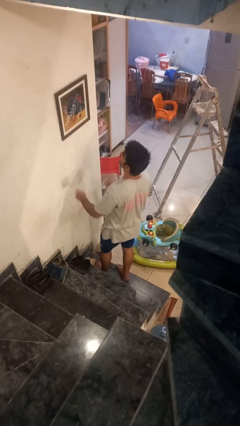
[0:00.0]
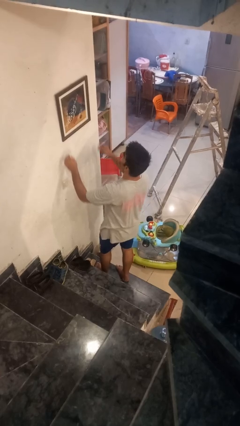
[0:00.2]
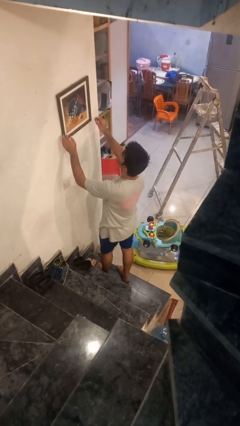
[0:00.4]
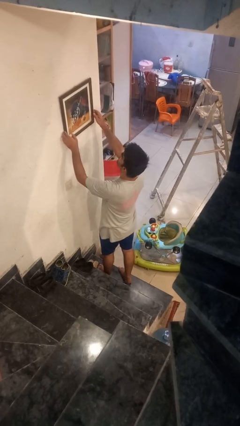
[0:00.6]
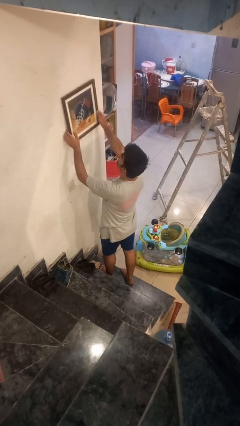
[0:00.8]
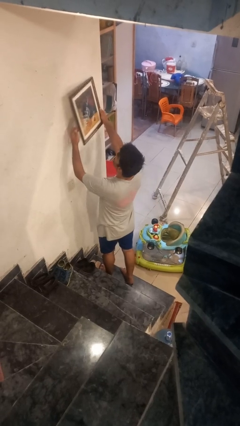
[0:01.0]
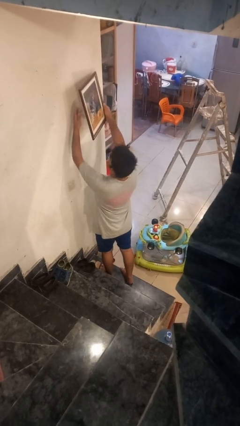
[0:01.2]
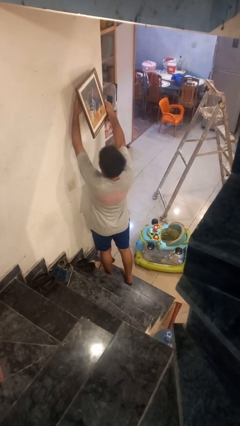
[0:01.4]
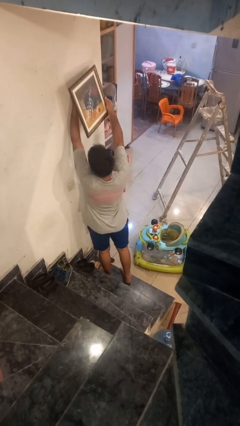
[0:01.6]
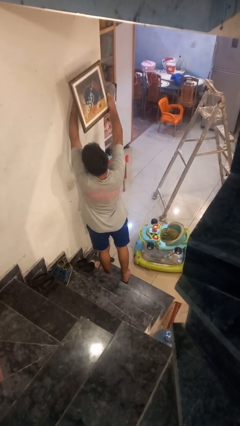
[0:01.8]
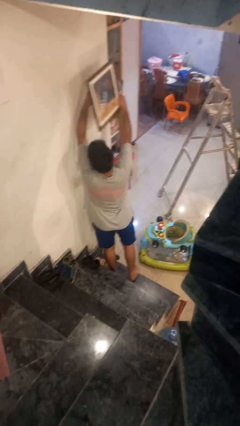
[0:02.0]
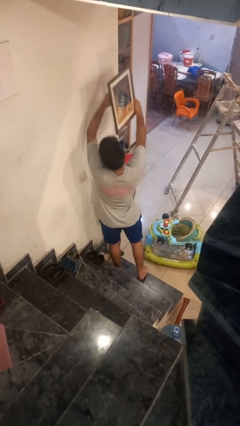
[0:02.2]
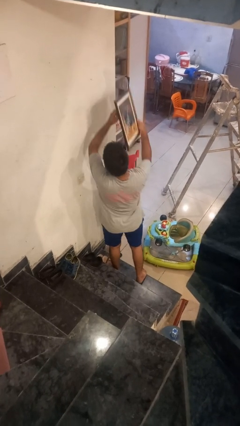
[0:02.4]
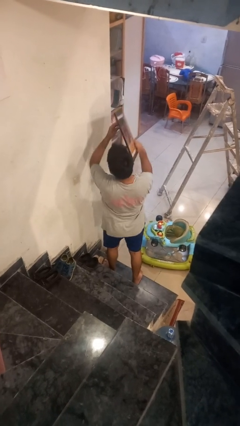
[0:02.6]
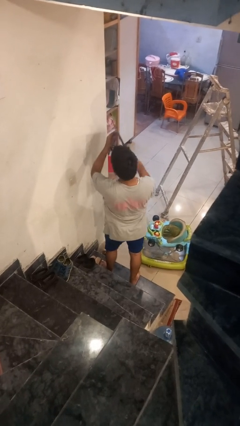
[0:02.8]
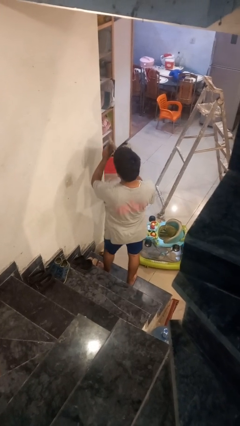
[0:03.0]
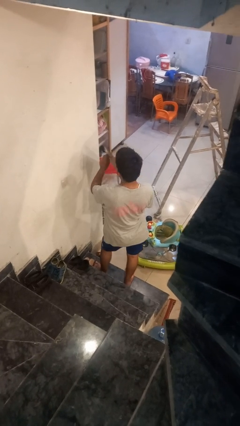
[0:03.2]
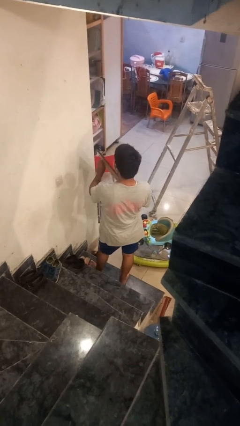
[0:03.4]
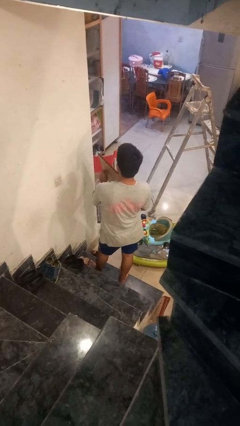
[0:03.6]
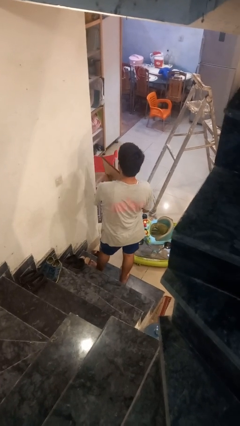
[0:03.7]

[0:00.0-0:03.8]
person takes down picture frame

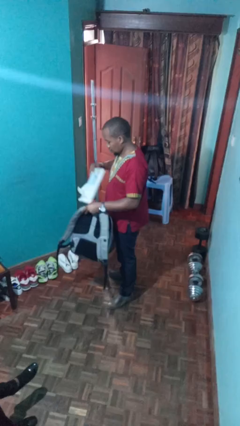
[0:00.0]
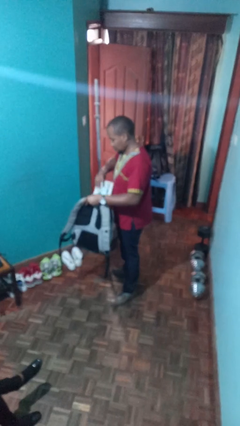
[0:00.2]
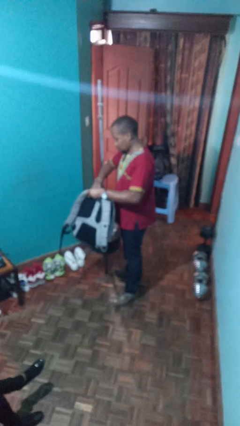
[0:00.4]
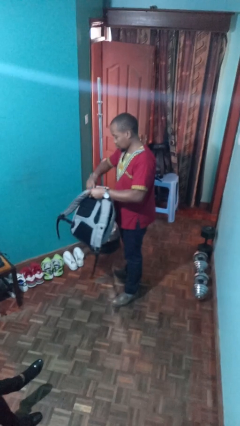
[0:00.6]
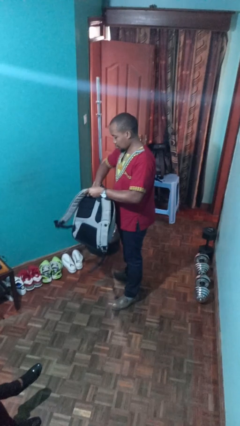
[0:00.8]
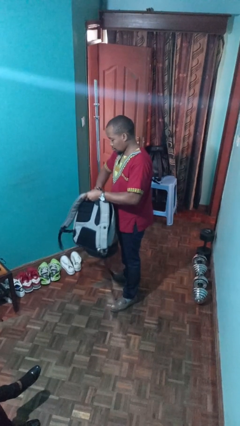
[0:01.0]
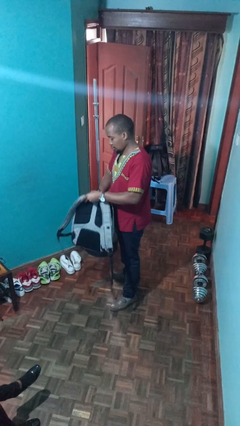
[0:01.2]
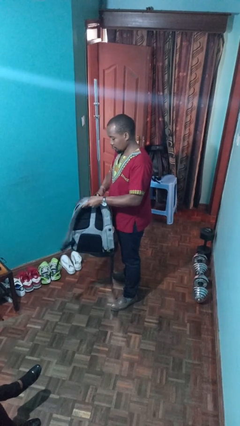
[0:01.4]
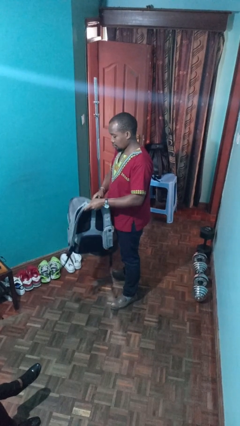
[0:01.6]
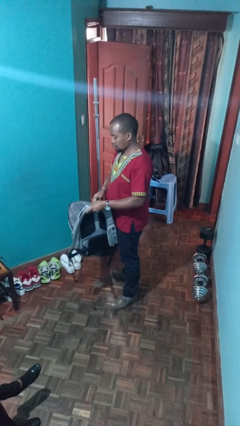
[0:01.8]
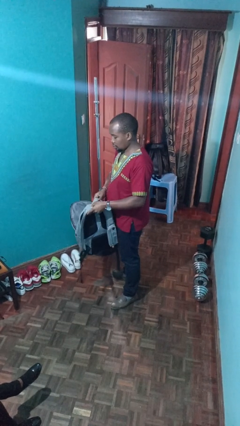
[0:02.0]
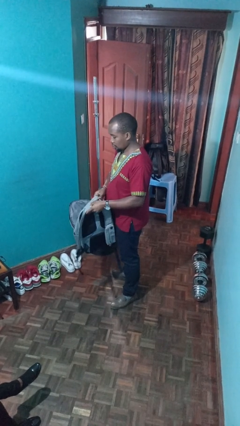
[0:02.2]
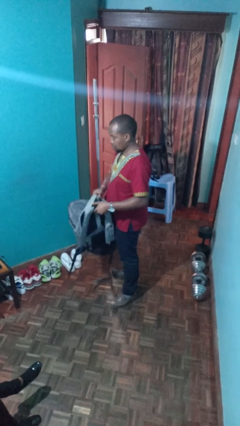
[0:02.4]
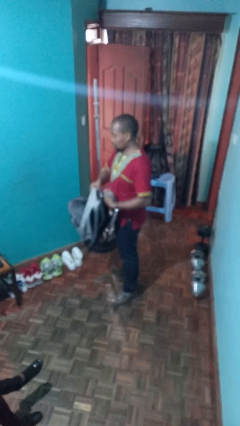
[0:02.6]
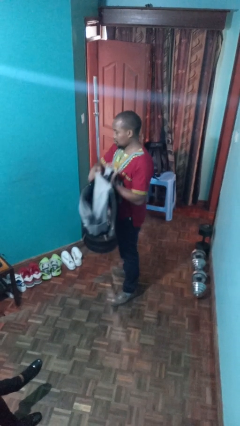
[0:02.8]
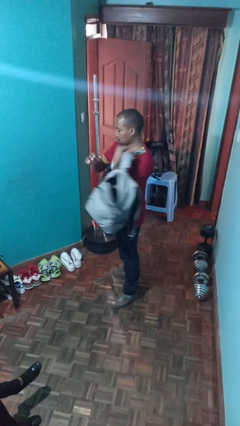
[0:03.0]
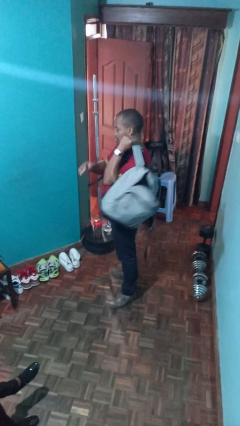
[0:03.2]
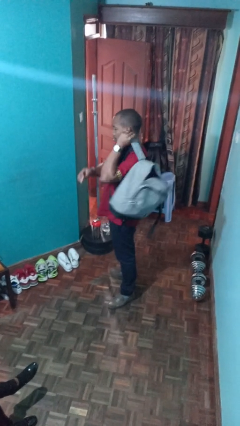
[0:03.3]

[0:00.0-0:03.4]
person puts object into backpack

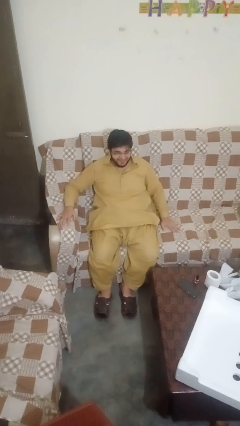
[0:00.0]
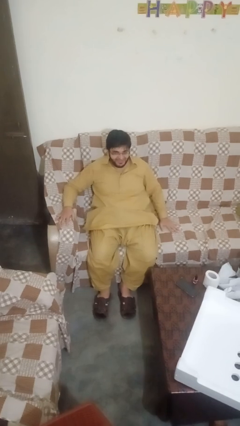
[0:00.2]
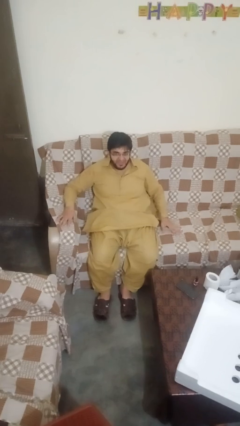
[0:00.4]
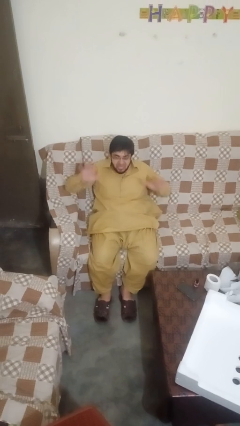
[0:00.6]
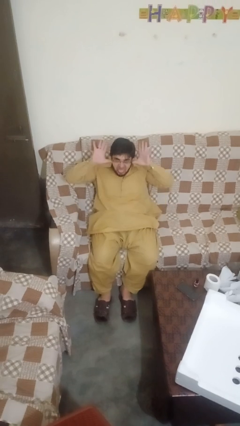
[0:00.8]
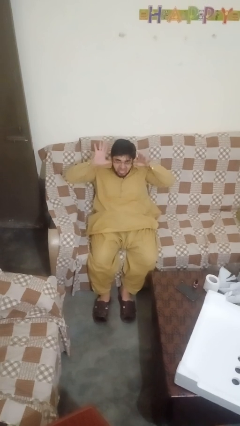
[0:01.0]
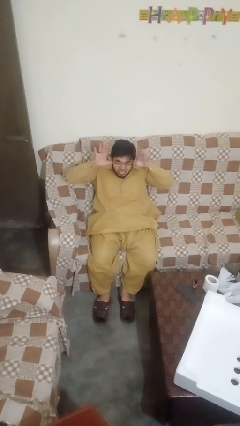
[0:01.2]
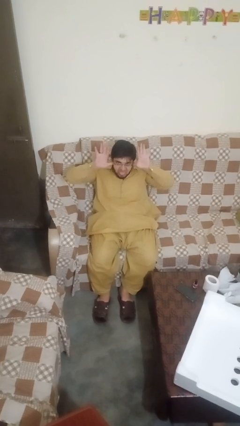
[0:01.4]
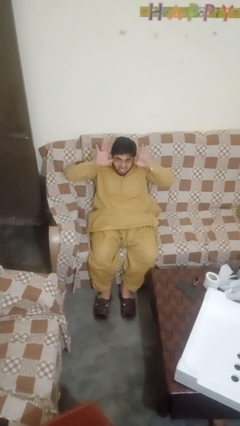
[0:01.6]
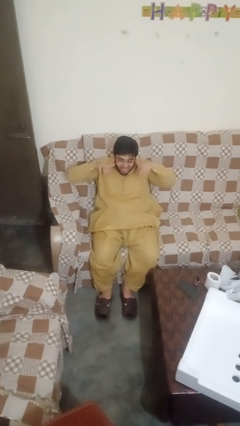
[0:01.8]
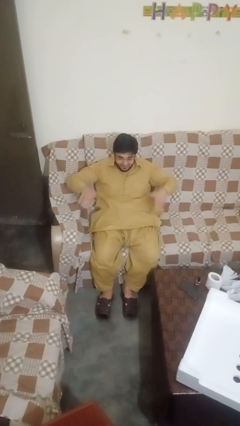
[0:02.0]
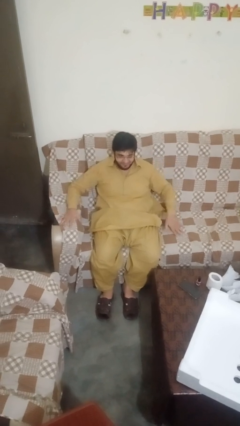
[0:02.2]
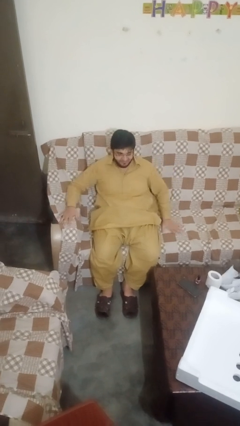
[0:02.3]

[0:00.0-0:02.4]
person sticks out tongue

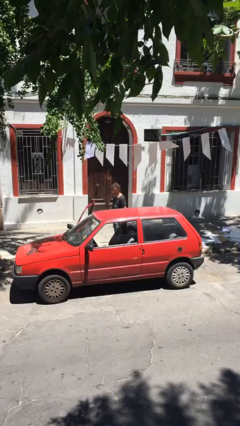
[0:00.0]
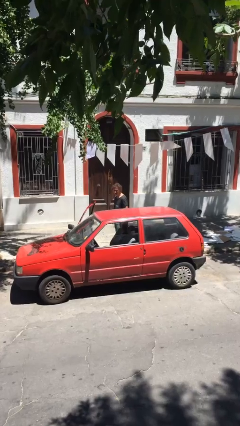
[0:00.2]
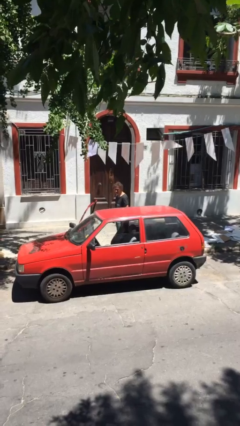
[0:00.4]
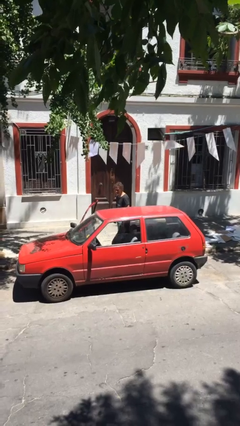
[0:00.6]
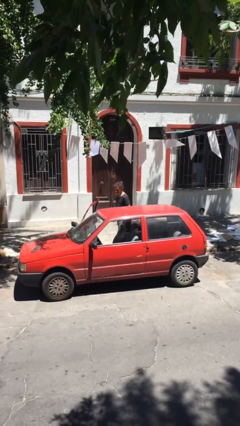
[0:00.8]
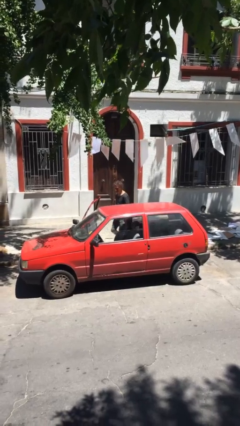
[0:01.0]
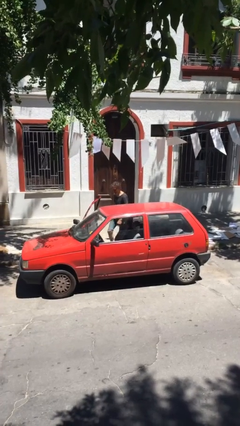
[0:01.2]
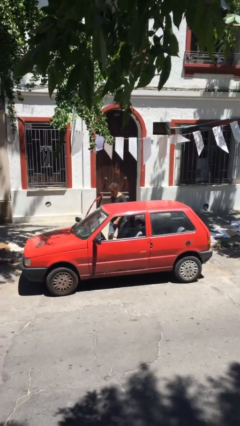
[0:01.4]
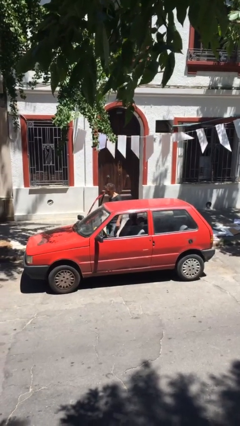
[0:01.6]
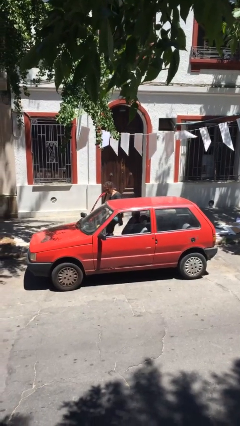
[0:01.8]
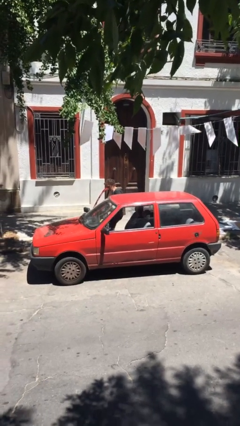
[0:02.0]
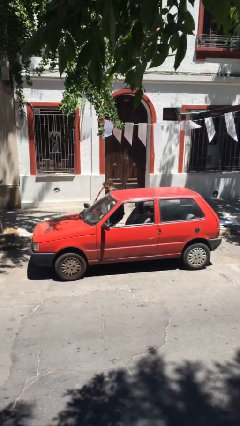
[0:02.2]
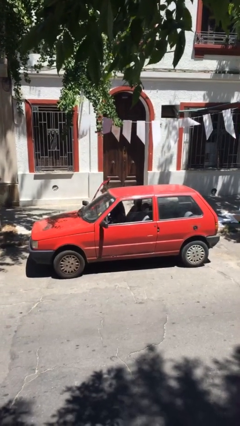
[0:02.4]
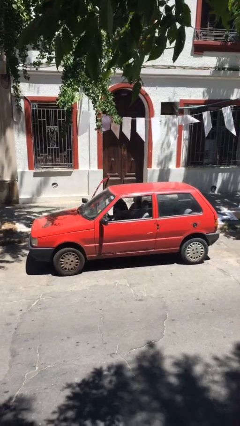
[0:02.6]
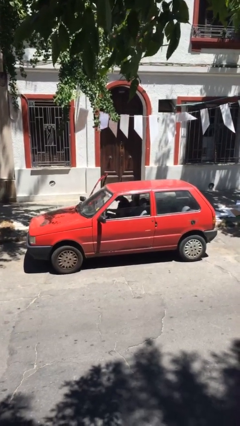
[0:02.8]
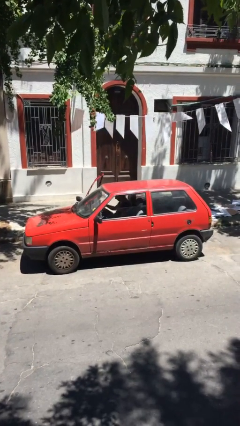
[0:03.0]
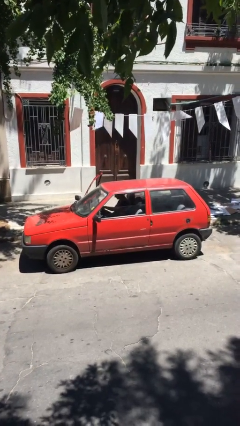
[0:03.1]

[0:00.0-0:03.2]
person enters car

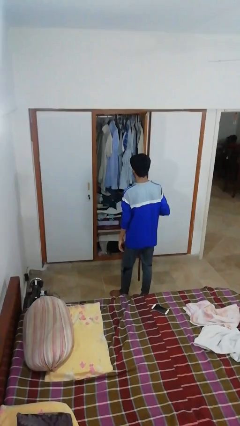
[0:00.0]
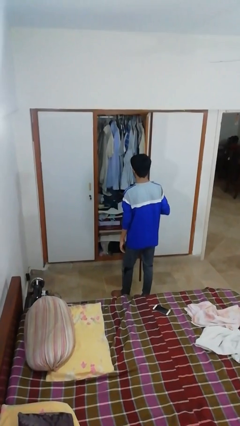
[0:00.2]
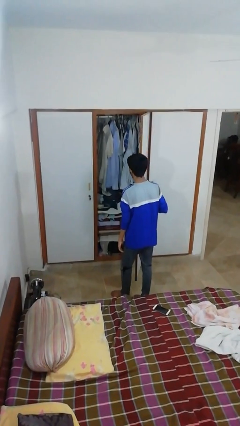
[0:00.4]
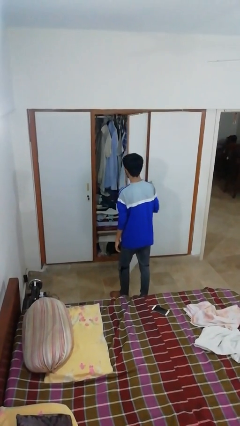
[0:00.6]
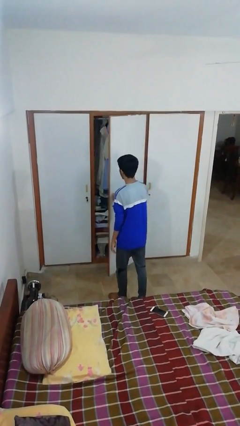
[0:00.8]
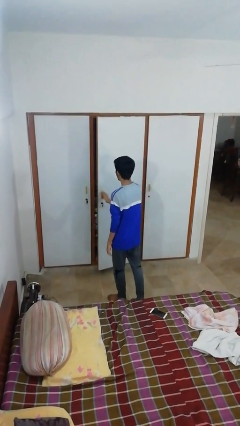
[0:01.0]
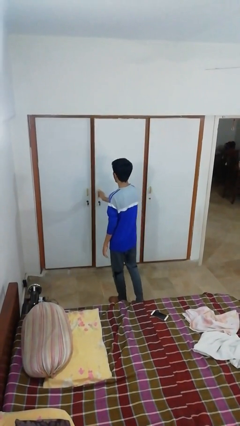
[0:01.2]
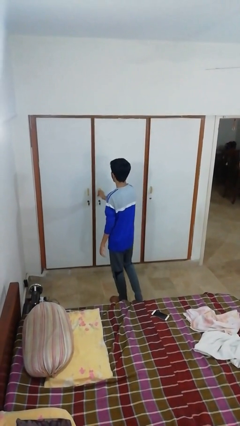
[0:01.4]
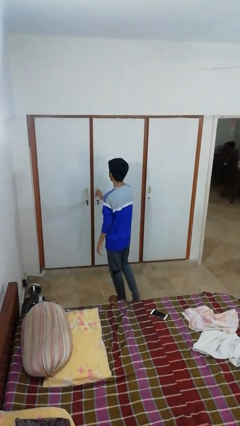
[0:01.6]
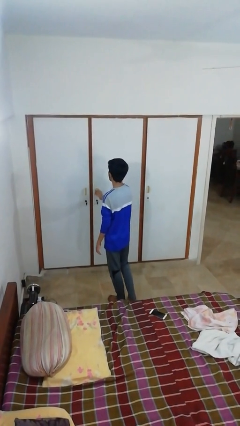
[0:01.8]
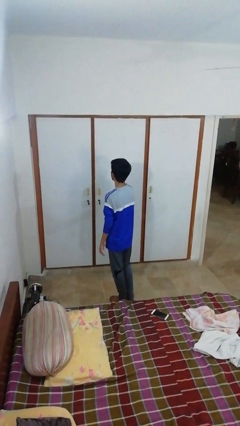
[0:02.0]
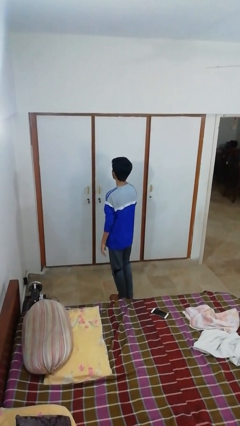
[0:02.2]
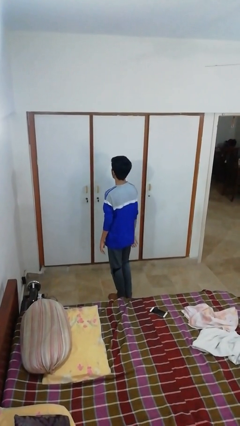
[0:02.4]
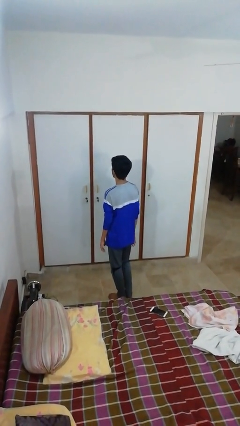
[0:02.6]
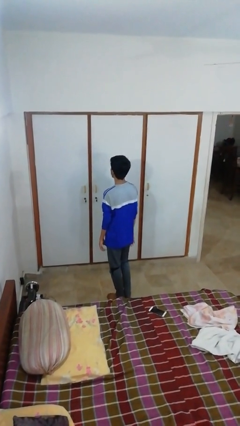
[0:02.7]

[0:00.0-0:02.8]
person closes closet door

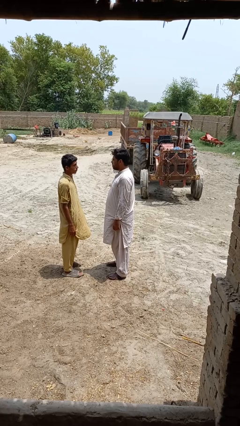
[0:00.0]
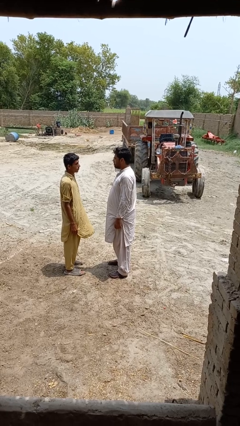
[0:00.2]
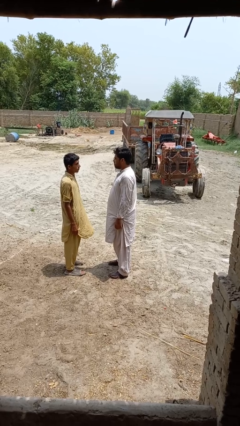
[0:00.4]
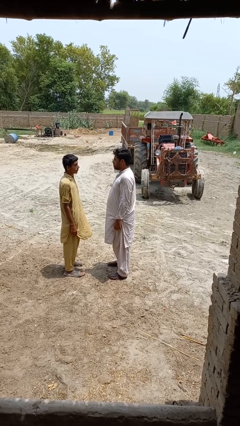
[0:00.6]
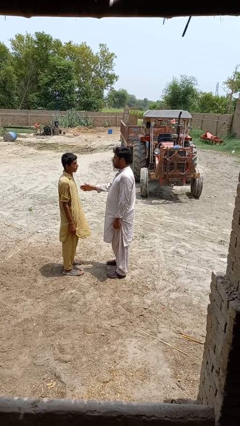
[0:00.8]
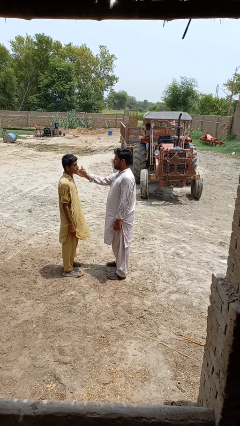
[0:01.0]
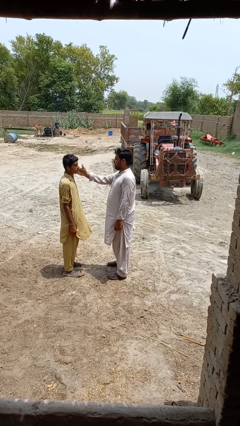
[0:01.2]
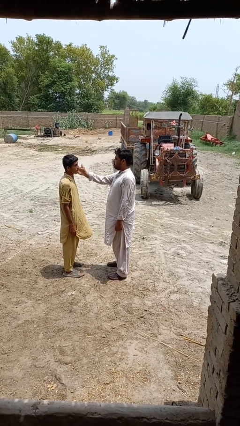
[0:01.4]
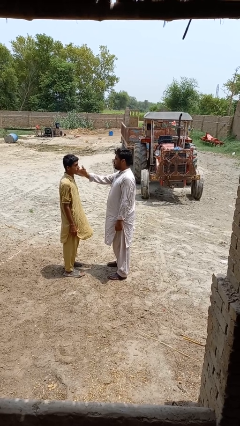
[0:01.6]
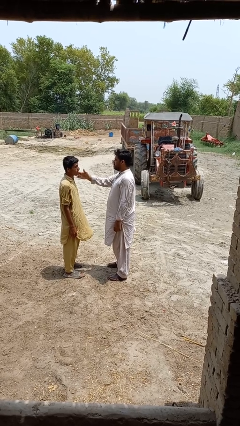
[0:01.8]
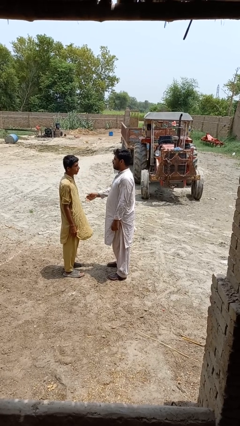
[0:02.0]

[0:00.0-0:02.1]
person touches face of person
